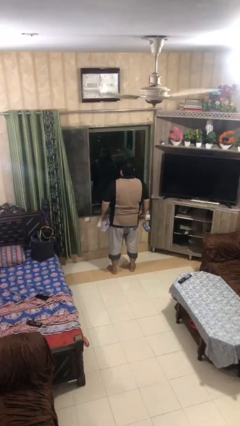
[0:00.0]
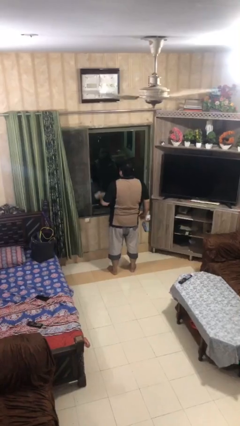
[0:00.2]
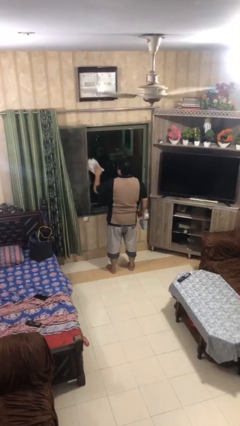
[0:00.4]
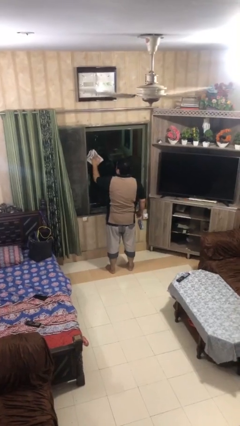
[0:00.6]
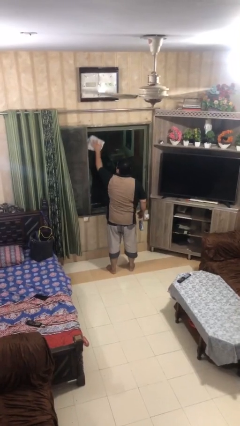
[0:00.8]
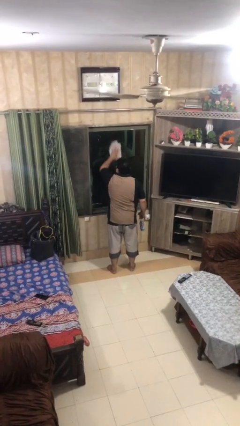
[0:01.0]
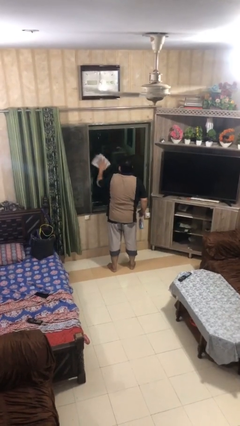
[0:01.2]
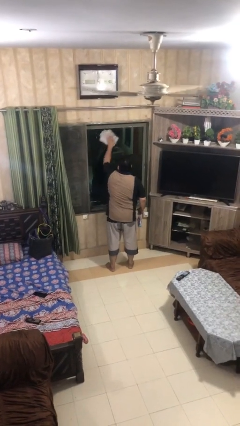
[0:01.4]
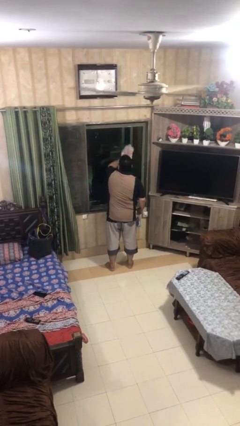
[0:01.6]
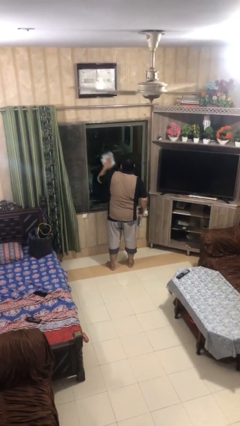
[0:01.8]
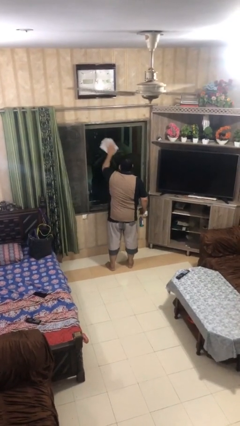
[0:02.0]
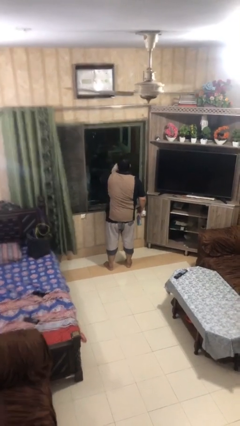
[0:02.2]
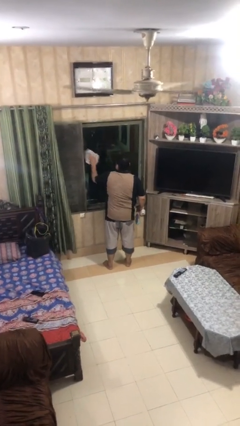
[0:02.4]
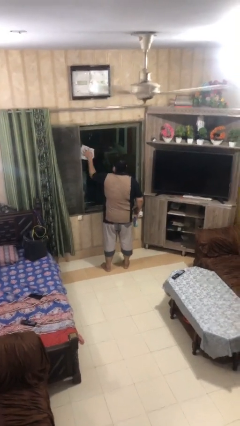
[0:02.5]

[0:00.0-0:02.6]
person washes window

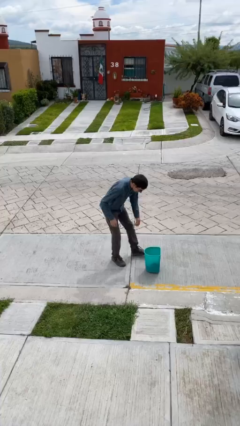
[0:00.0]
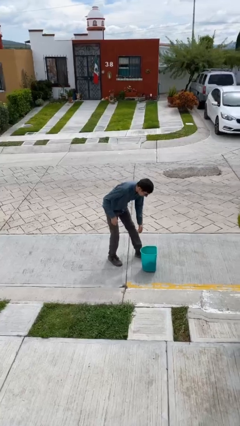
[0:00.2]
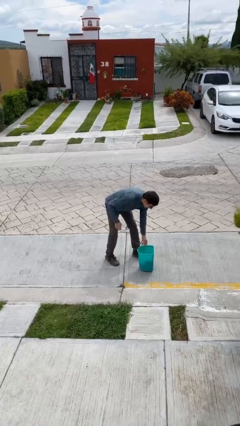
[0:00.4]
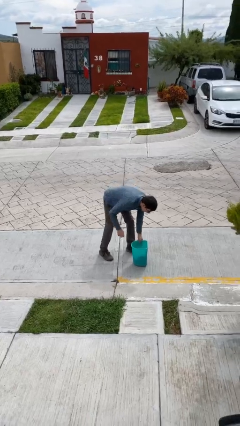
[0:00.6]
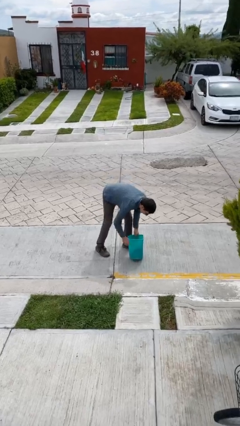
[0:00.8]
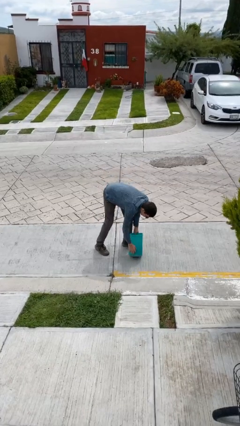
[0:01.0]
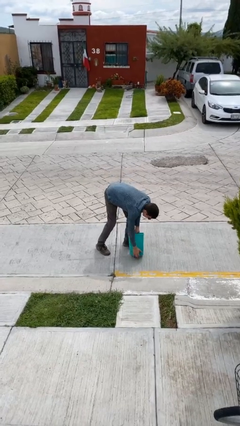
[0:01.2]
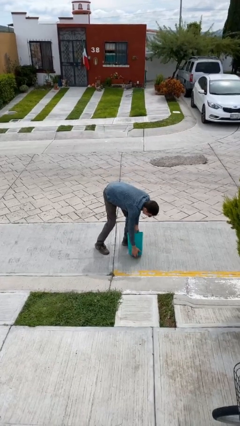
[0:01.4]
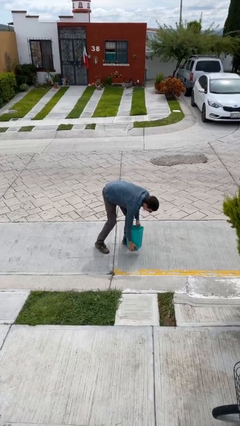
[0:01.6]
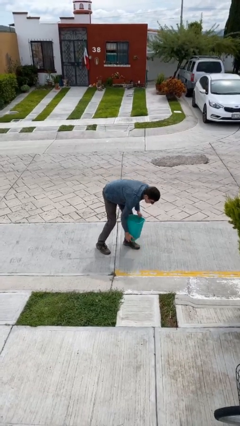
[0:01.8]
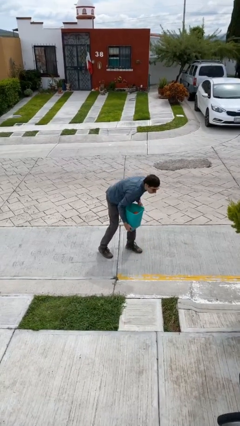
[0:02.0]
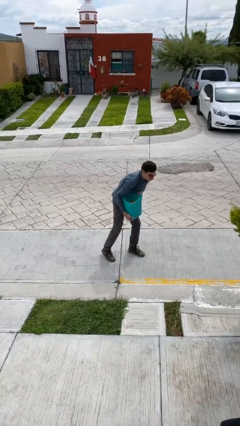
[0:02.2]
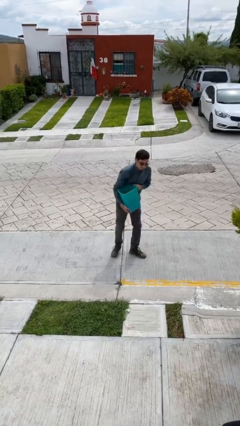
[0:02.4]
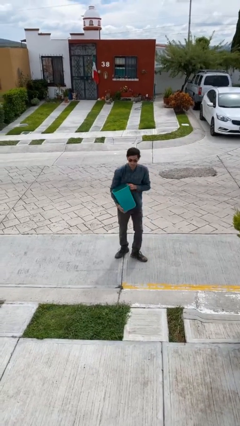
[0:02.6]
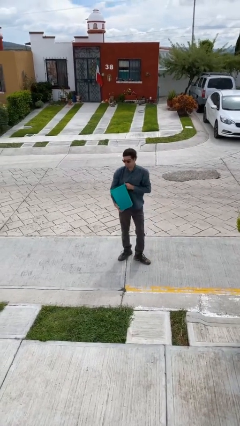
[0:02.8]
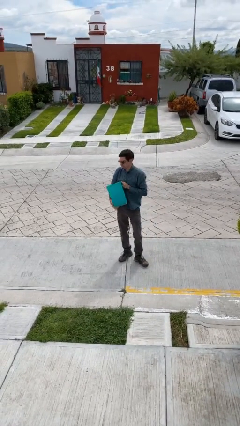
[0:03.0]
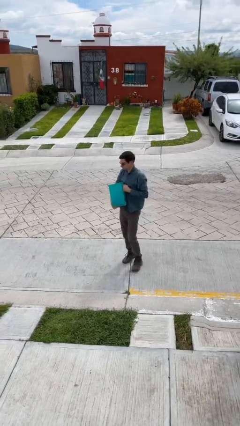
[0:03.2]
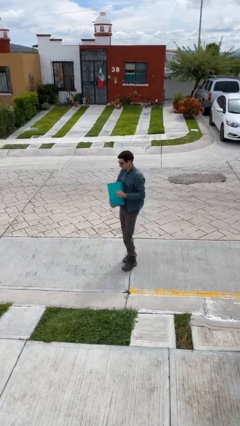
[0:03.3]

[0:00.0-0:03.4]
person picks up object from floor

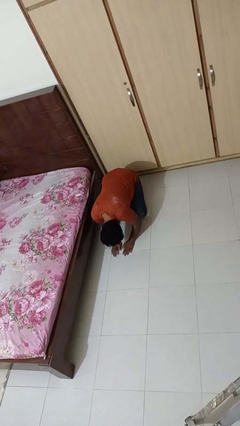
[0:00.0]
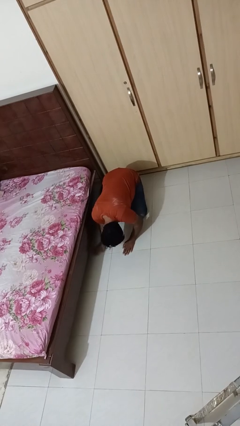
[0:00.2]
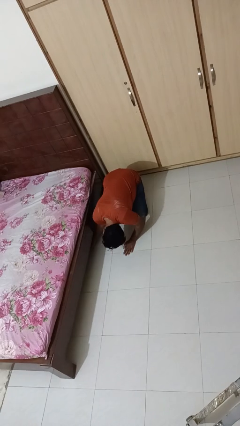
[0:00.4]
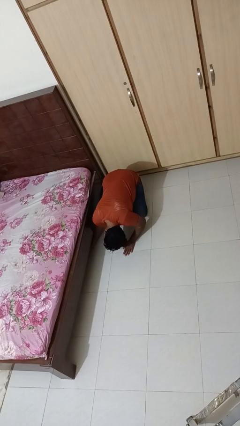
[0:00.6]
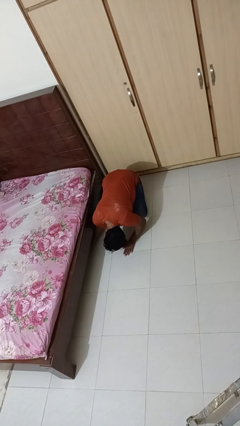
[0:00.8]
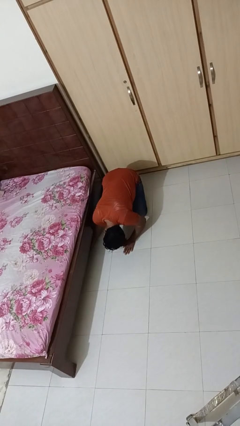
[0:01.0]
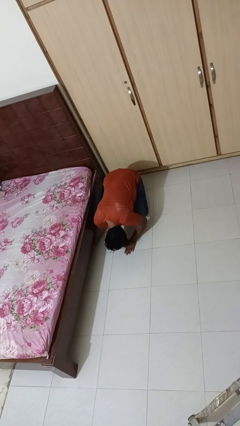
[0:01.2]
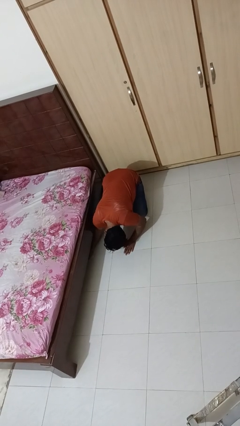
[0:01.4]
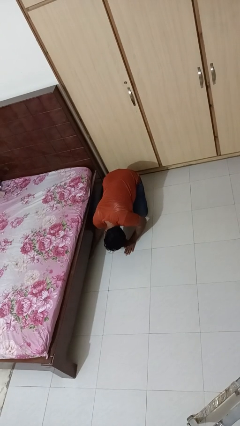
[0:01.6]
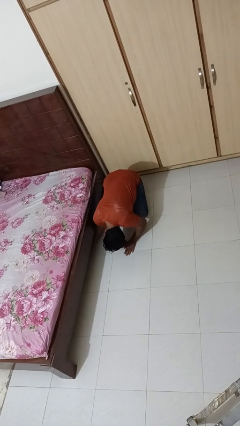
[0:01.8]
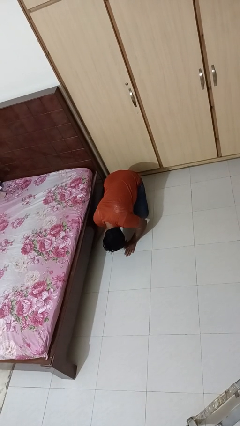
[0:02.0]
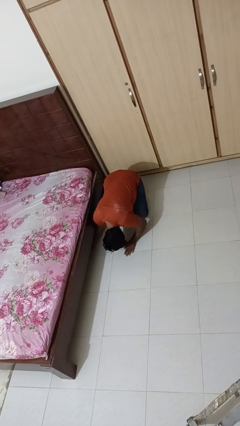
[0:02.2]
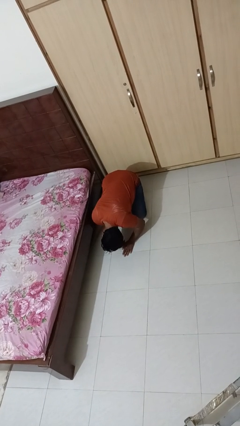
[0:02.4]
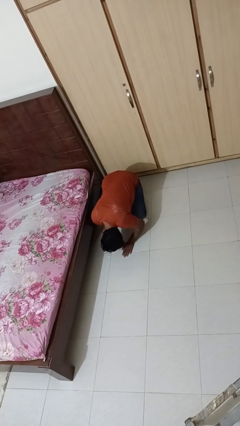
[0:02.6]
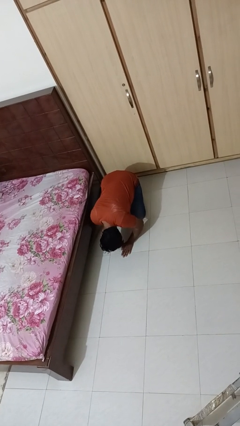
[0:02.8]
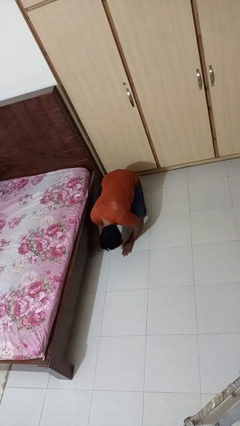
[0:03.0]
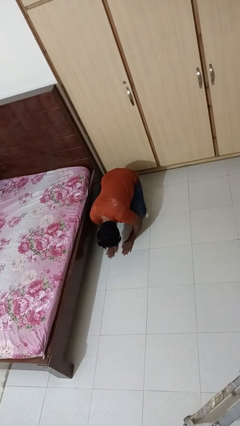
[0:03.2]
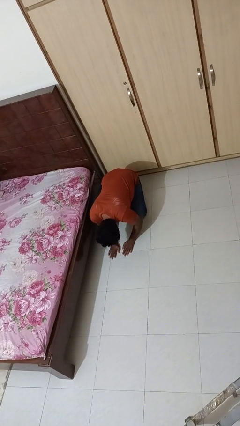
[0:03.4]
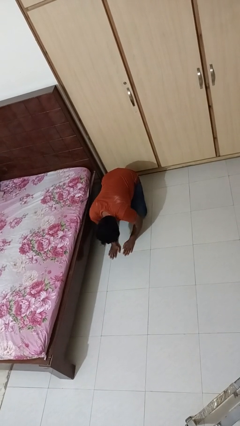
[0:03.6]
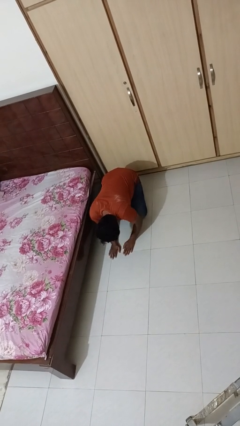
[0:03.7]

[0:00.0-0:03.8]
person searches under bed

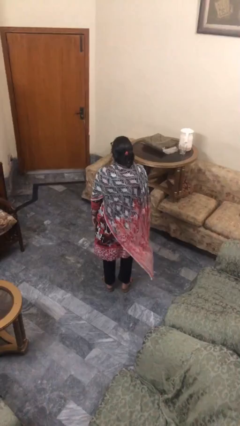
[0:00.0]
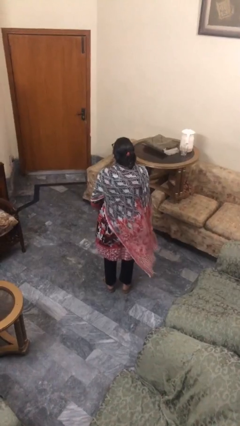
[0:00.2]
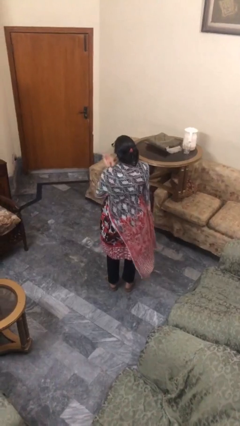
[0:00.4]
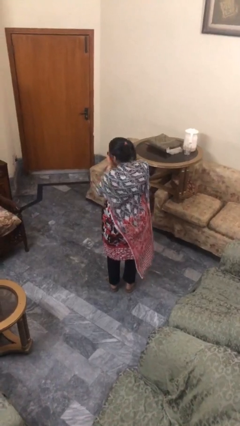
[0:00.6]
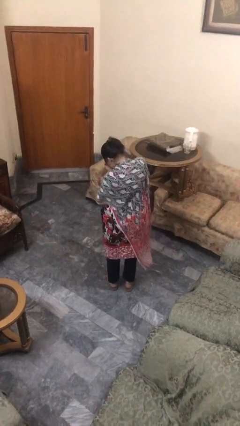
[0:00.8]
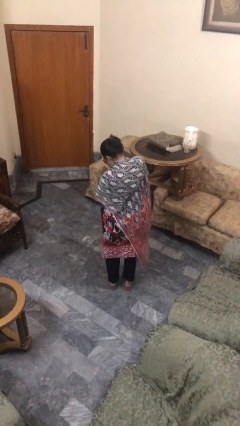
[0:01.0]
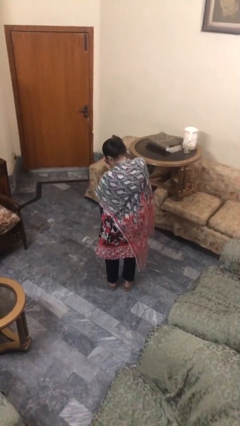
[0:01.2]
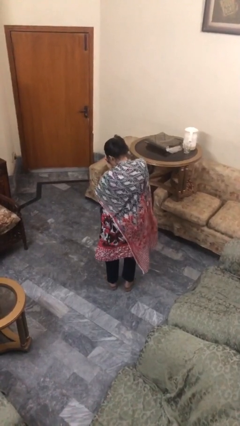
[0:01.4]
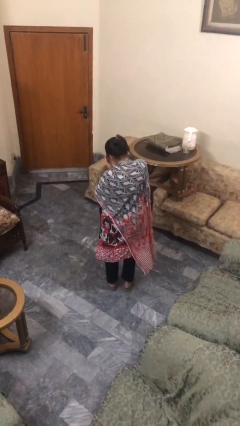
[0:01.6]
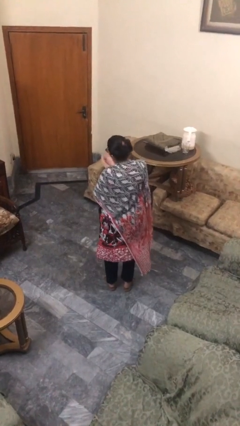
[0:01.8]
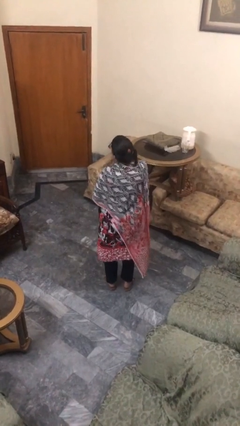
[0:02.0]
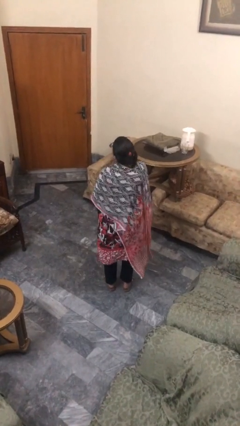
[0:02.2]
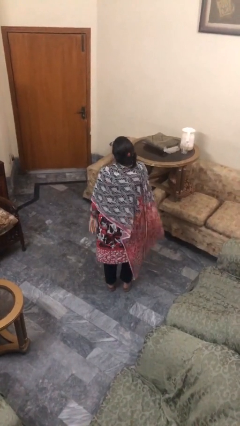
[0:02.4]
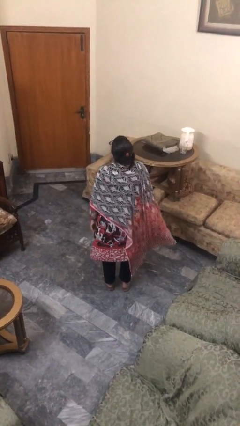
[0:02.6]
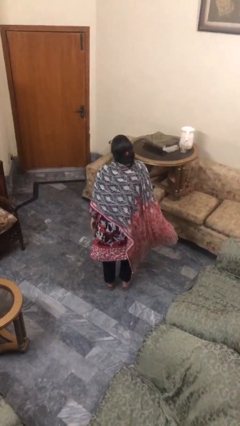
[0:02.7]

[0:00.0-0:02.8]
person sneezes into hand

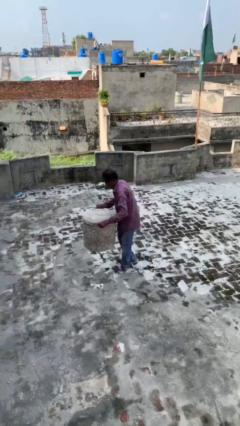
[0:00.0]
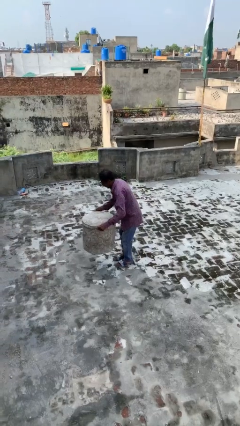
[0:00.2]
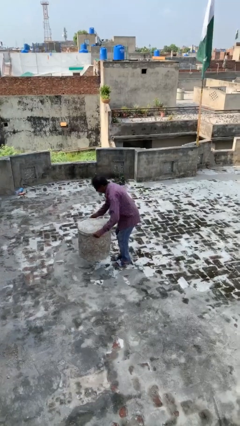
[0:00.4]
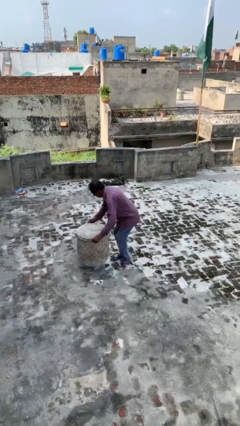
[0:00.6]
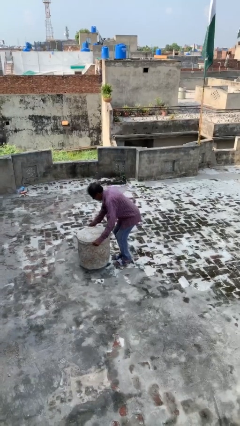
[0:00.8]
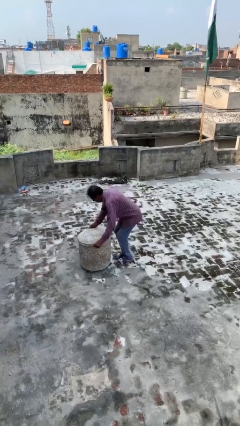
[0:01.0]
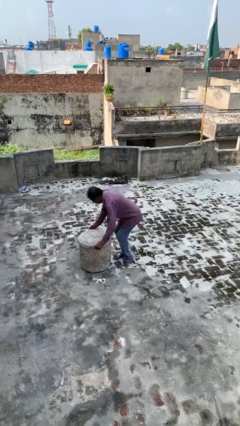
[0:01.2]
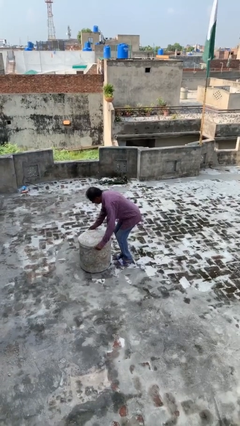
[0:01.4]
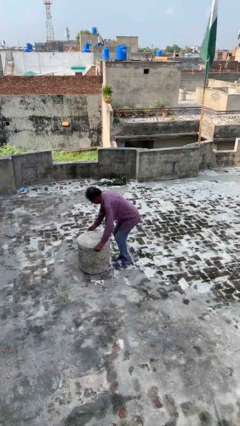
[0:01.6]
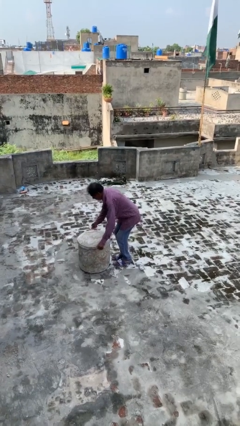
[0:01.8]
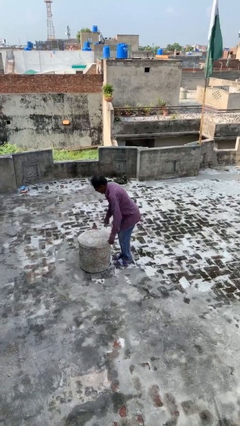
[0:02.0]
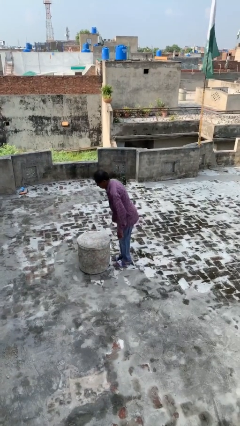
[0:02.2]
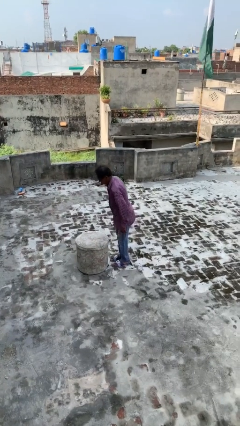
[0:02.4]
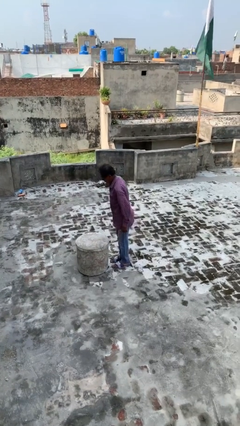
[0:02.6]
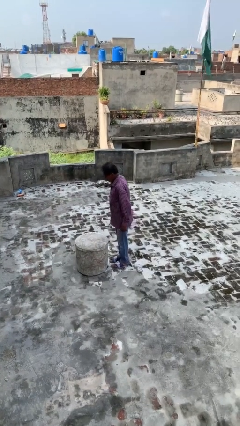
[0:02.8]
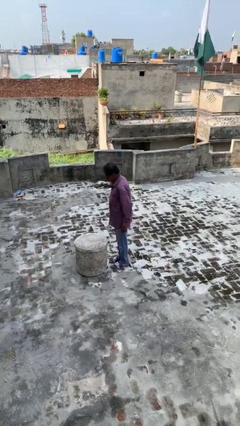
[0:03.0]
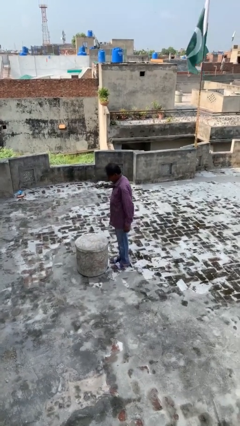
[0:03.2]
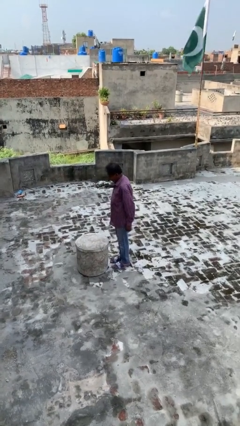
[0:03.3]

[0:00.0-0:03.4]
person puts down object on floor

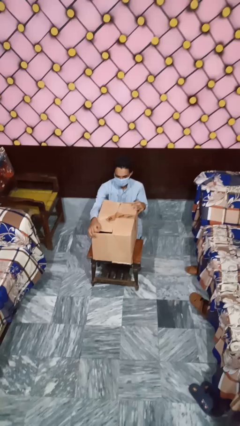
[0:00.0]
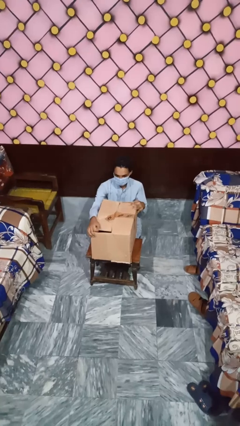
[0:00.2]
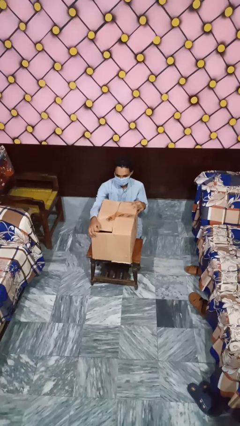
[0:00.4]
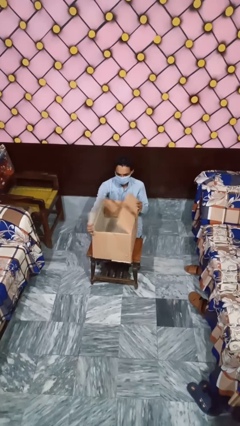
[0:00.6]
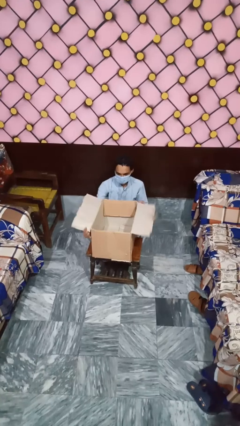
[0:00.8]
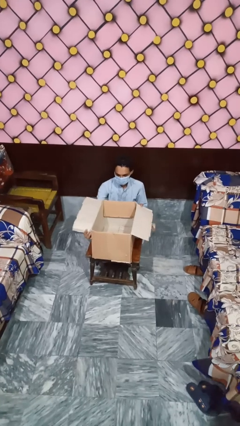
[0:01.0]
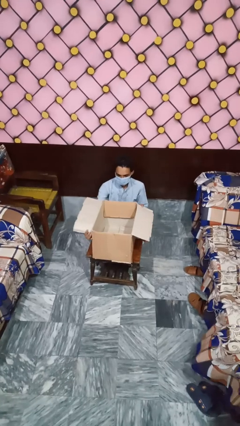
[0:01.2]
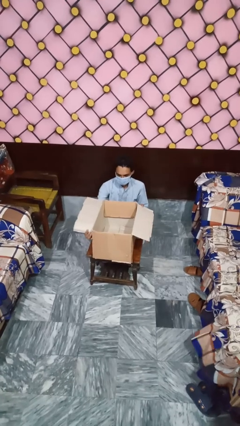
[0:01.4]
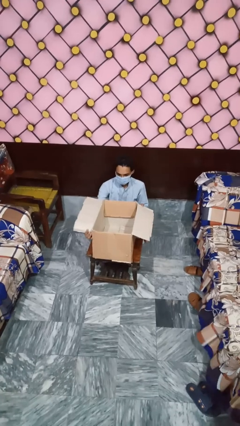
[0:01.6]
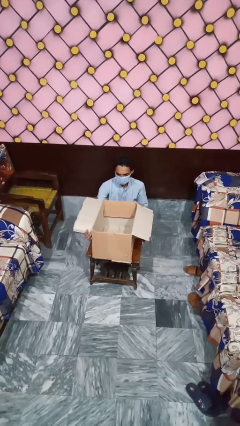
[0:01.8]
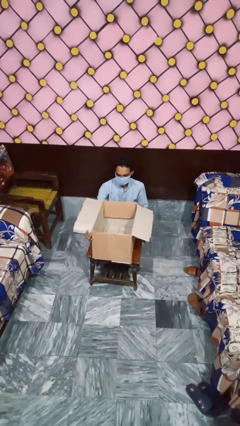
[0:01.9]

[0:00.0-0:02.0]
person opens box
